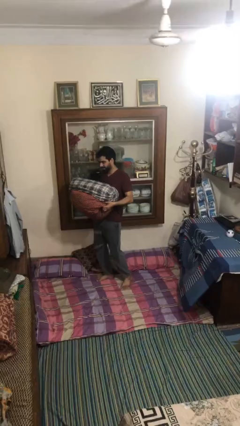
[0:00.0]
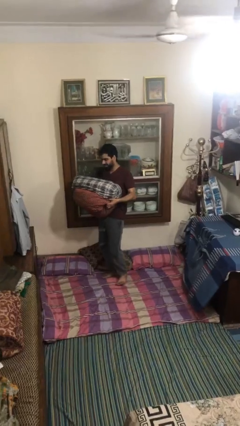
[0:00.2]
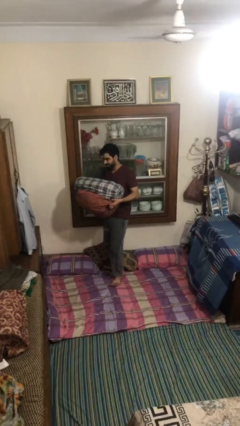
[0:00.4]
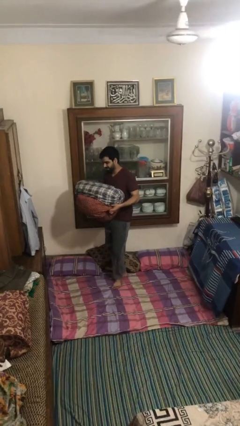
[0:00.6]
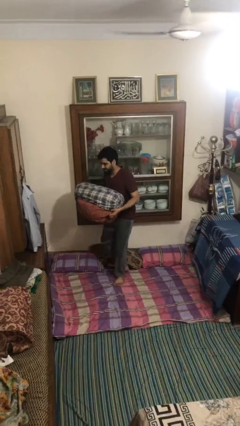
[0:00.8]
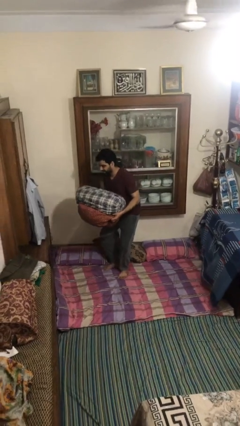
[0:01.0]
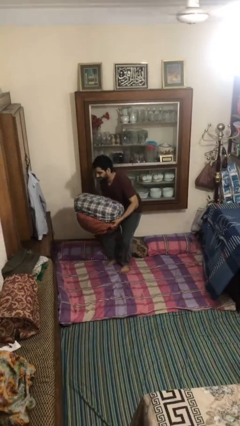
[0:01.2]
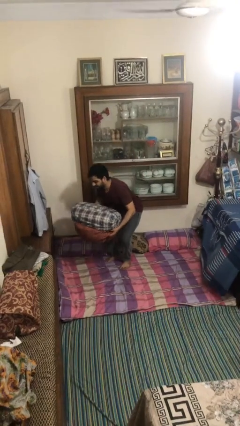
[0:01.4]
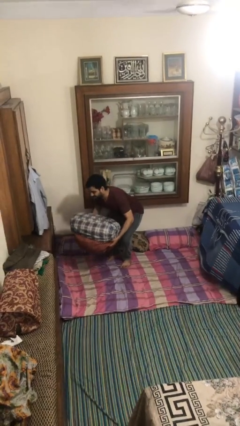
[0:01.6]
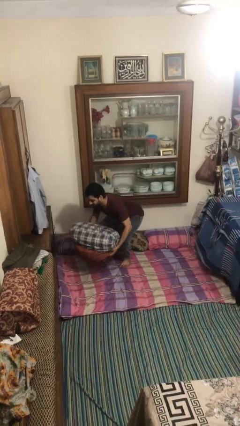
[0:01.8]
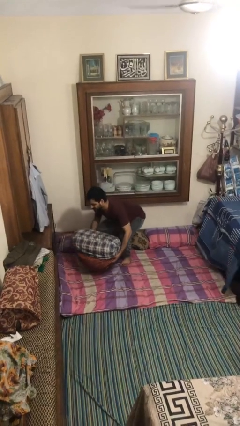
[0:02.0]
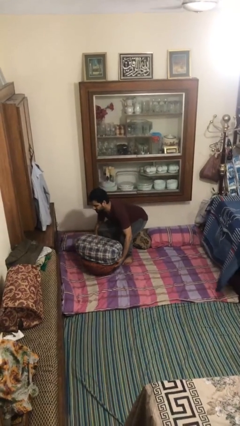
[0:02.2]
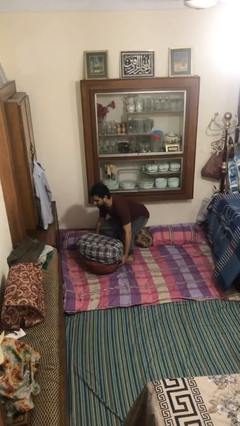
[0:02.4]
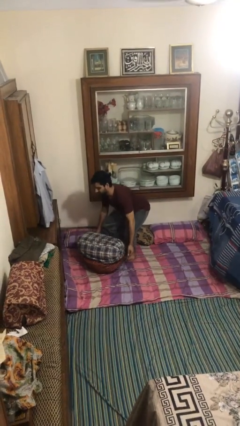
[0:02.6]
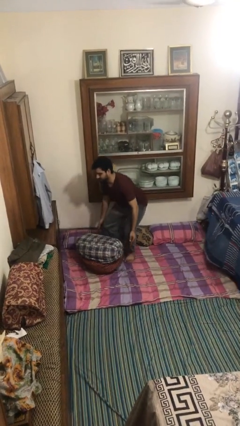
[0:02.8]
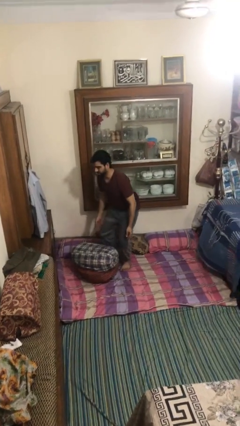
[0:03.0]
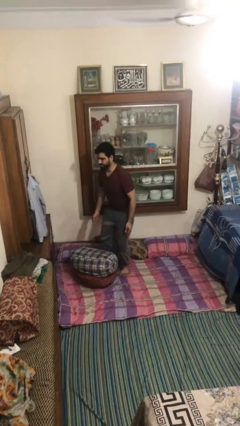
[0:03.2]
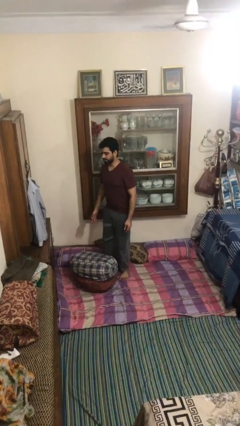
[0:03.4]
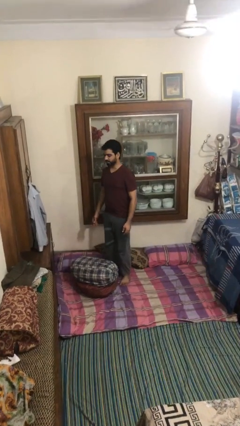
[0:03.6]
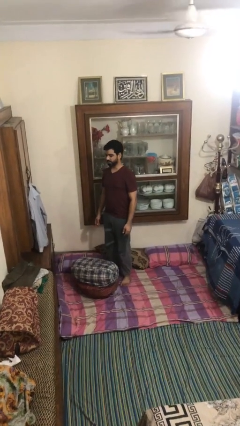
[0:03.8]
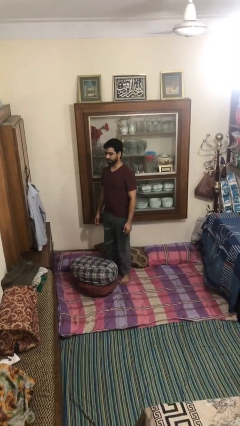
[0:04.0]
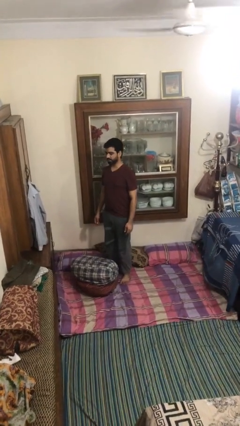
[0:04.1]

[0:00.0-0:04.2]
person puts down object on floor

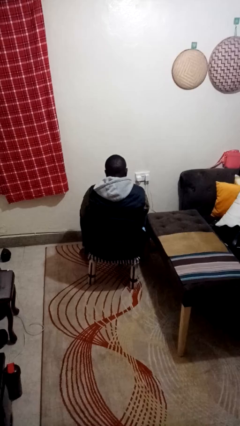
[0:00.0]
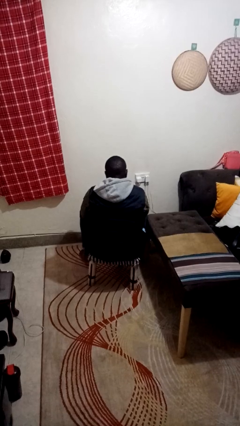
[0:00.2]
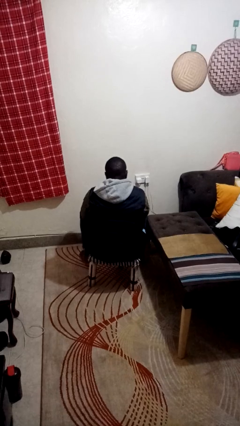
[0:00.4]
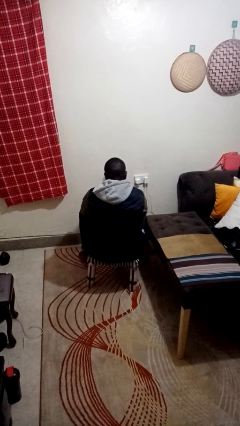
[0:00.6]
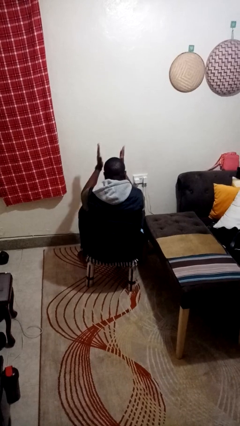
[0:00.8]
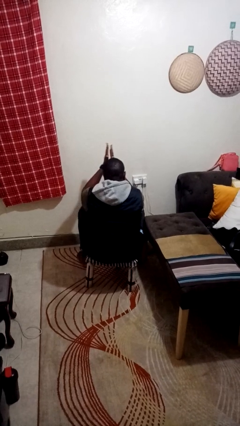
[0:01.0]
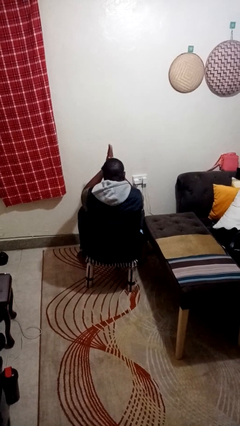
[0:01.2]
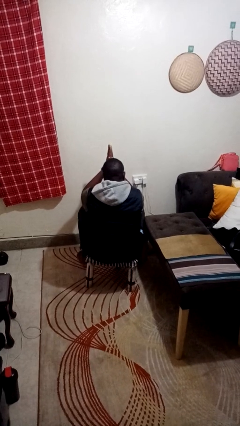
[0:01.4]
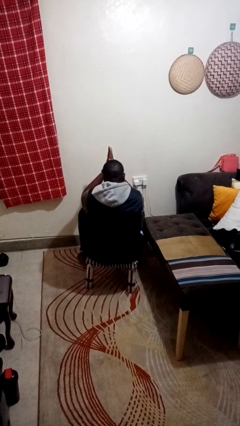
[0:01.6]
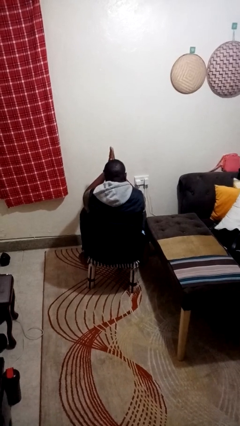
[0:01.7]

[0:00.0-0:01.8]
person claps hands

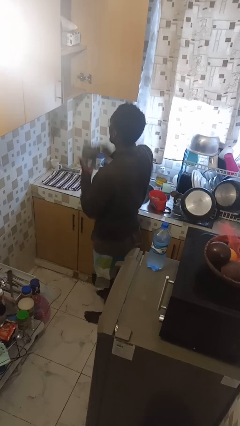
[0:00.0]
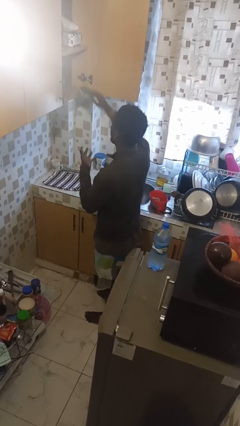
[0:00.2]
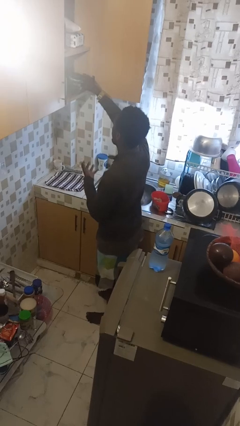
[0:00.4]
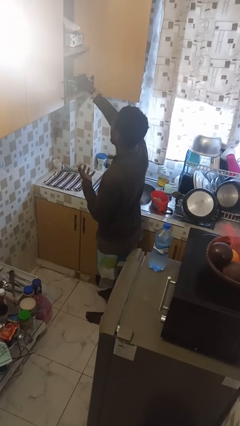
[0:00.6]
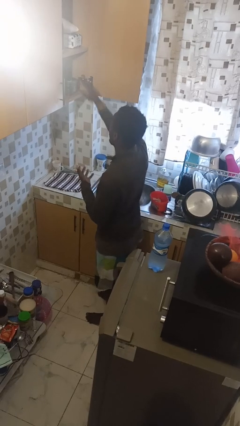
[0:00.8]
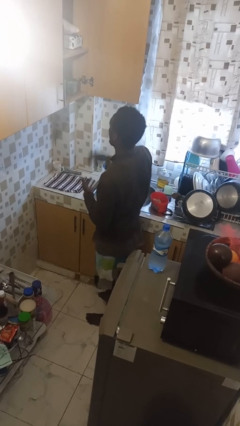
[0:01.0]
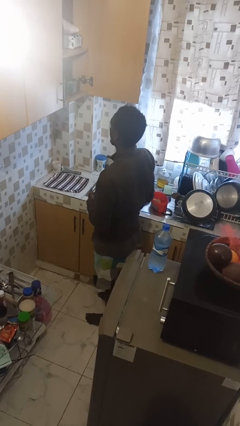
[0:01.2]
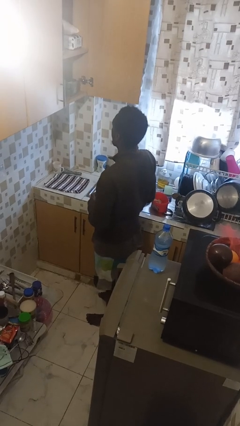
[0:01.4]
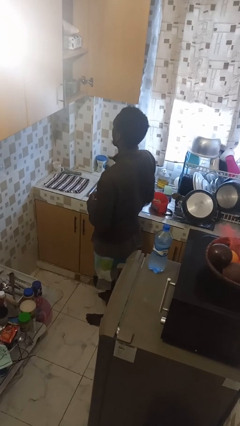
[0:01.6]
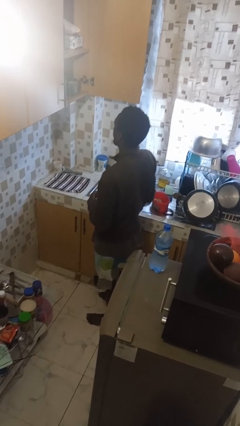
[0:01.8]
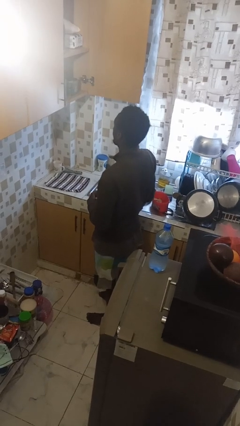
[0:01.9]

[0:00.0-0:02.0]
person puts down object into cabinet

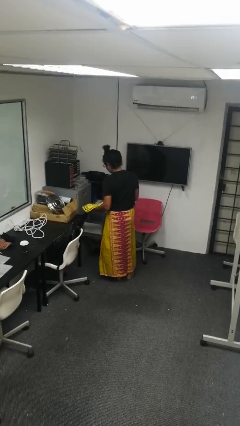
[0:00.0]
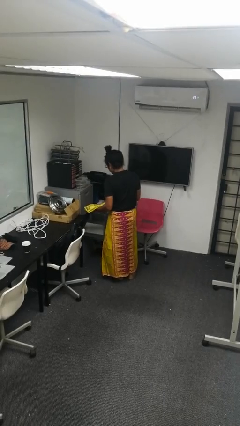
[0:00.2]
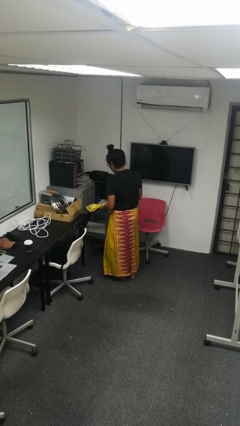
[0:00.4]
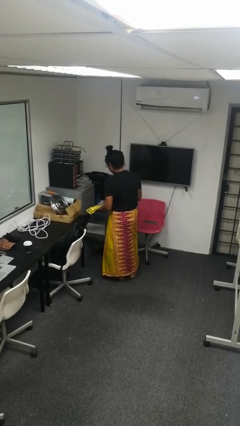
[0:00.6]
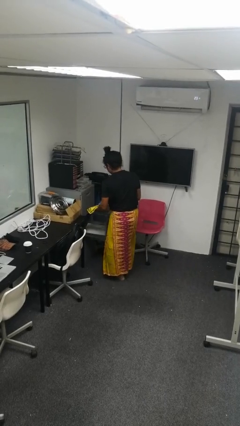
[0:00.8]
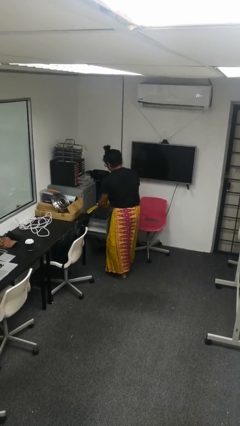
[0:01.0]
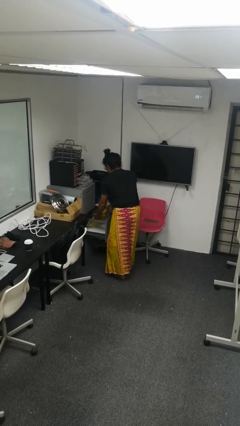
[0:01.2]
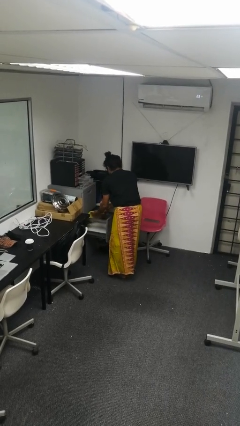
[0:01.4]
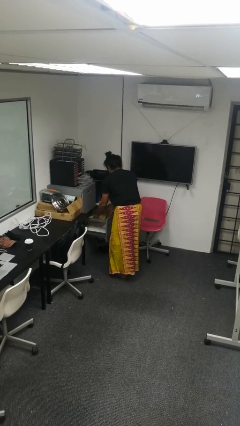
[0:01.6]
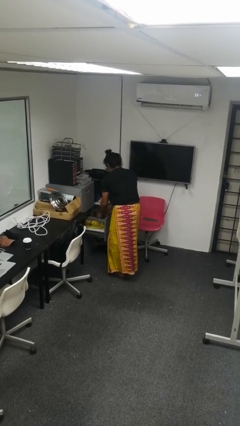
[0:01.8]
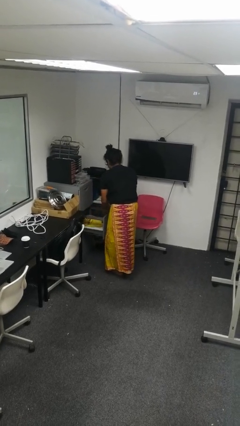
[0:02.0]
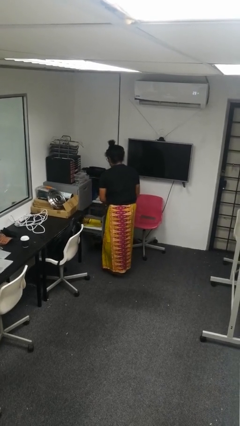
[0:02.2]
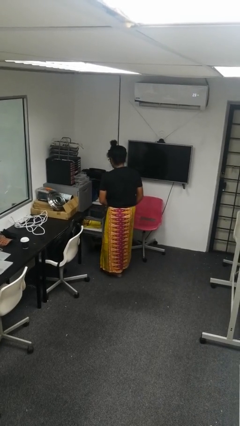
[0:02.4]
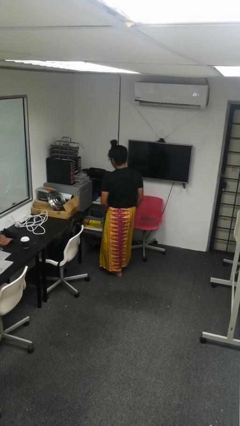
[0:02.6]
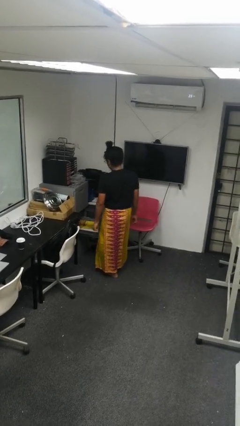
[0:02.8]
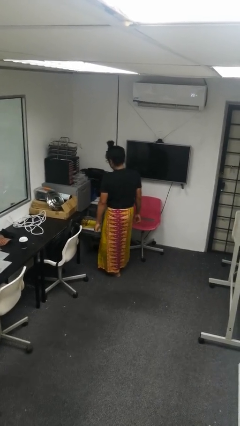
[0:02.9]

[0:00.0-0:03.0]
person puts clothes into dresser

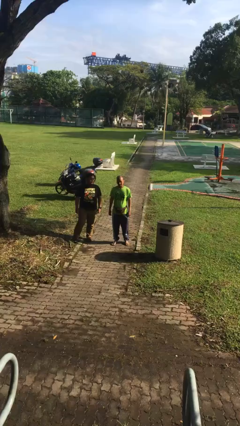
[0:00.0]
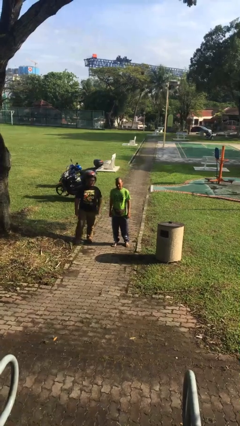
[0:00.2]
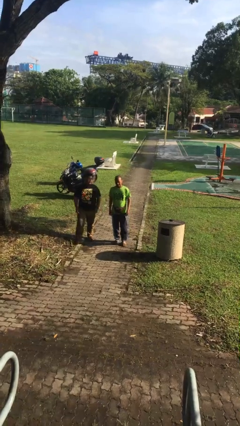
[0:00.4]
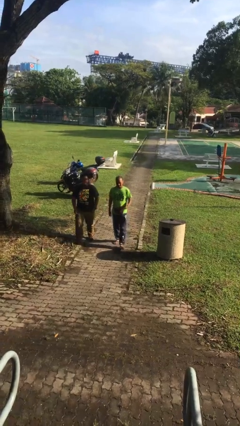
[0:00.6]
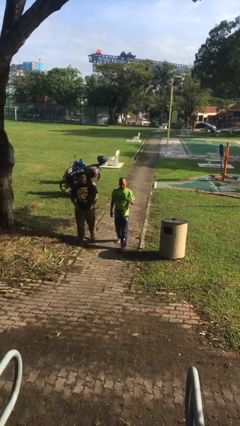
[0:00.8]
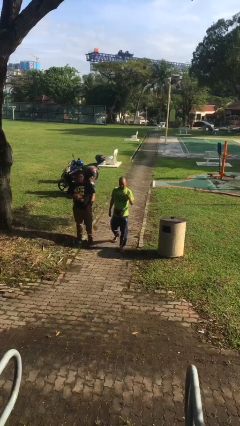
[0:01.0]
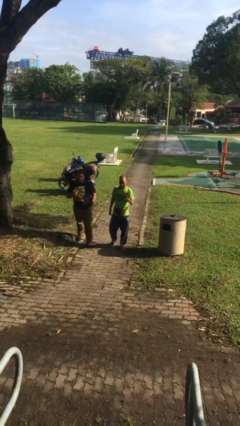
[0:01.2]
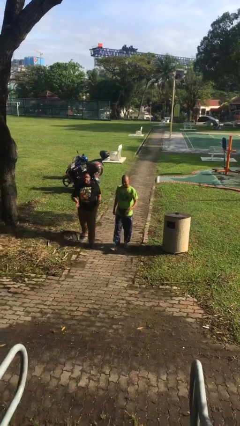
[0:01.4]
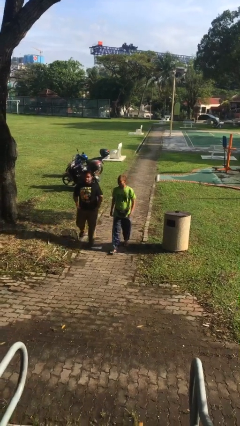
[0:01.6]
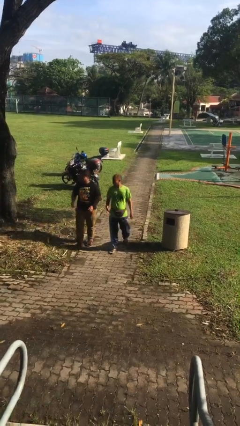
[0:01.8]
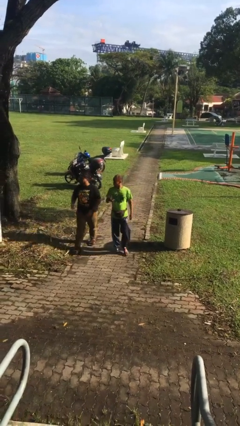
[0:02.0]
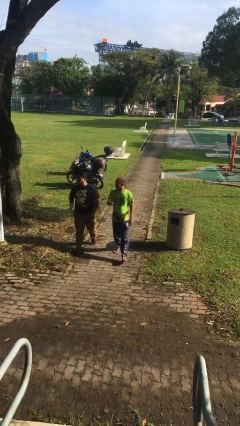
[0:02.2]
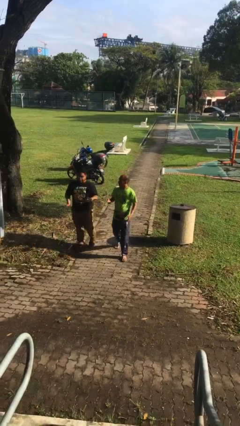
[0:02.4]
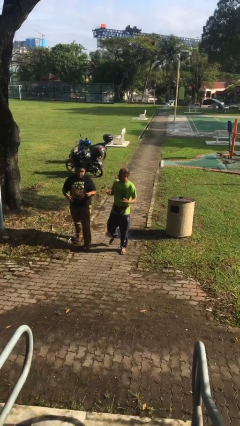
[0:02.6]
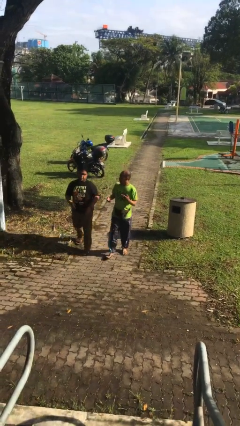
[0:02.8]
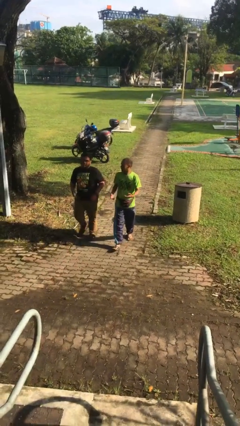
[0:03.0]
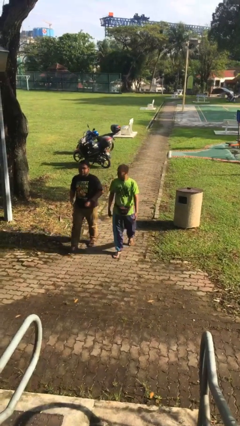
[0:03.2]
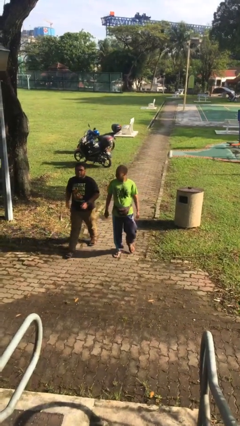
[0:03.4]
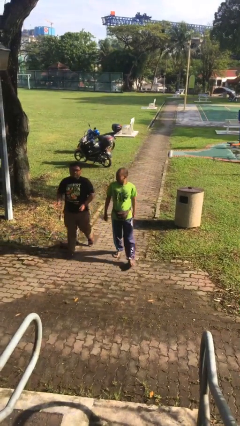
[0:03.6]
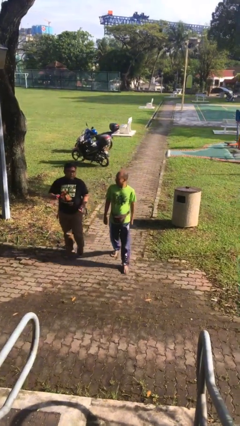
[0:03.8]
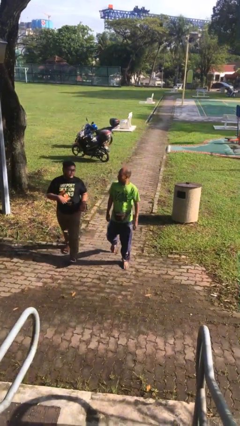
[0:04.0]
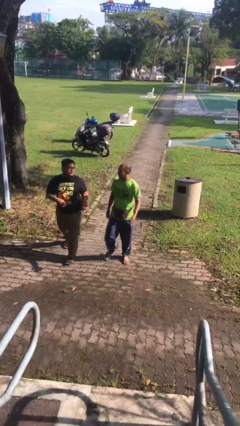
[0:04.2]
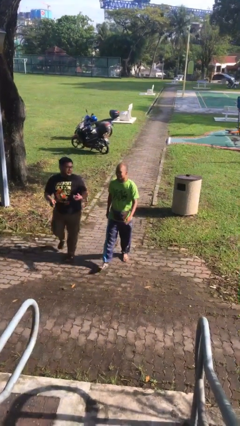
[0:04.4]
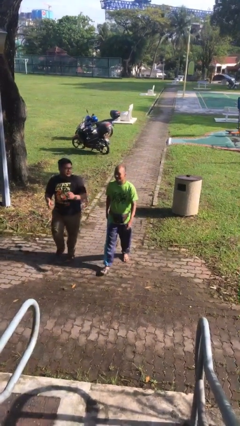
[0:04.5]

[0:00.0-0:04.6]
person talks to person

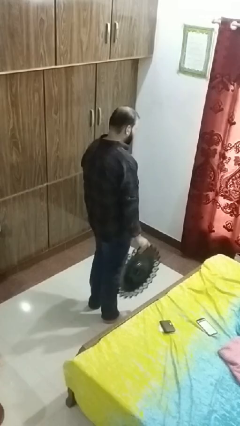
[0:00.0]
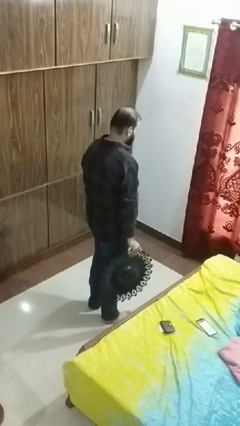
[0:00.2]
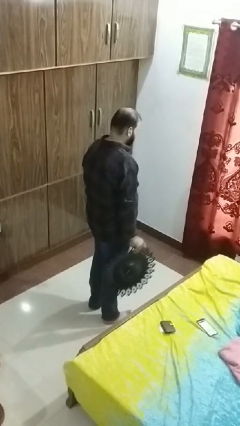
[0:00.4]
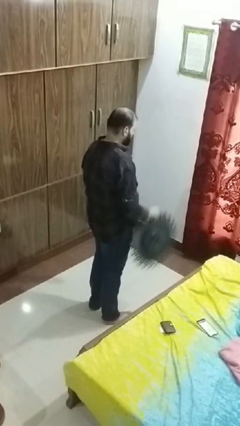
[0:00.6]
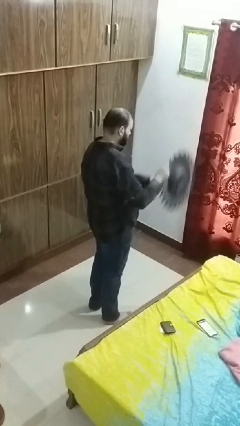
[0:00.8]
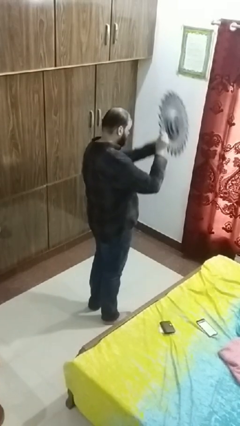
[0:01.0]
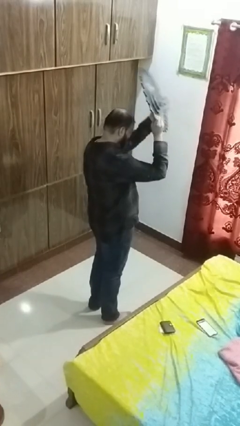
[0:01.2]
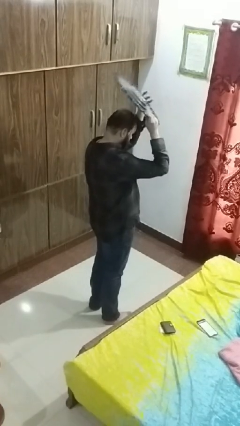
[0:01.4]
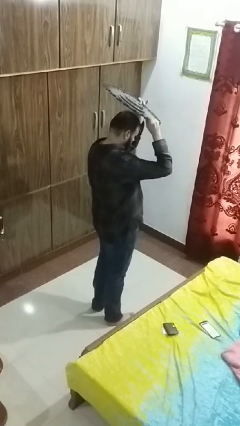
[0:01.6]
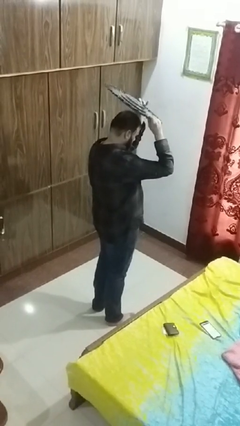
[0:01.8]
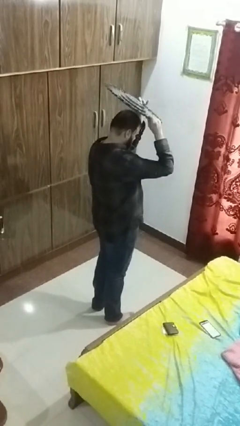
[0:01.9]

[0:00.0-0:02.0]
person holds object above head

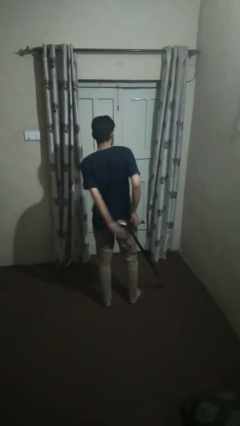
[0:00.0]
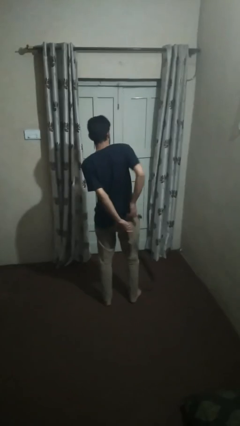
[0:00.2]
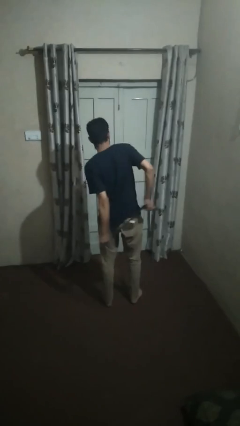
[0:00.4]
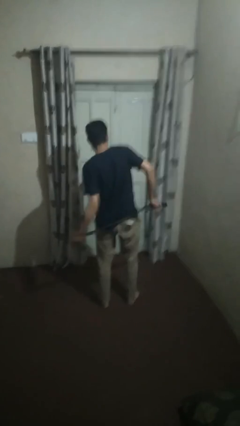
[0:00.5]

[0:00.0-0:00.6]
person takes off belt
